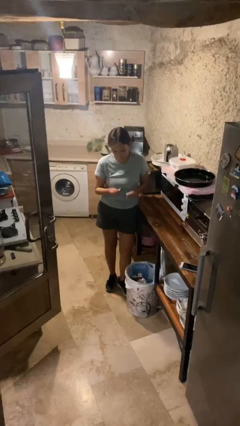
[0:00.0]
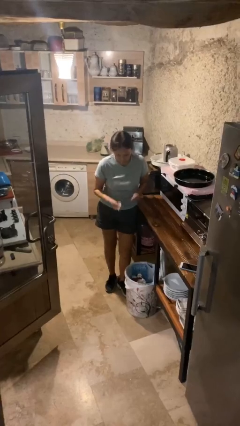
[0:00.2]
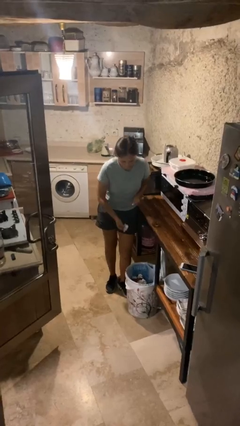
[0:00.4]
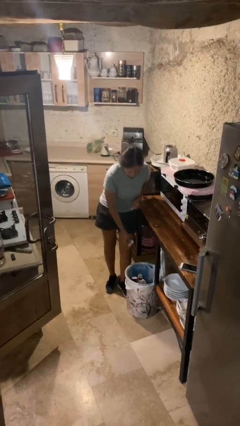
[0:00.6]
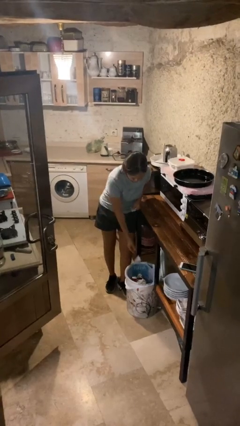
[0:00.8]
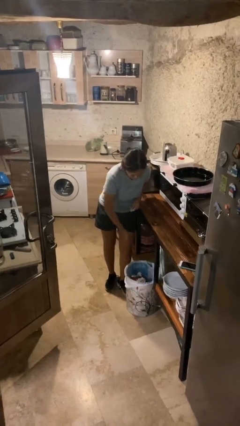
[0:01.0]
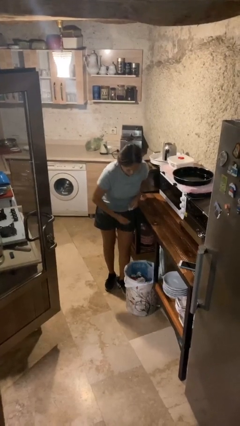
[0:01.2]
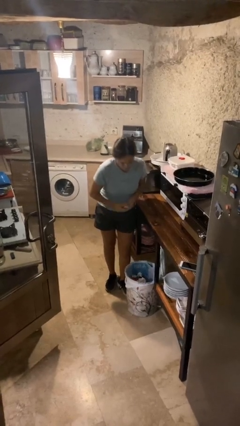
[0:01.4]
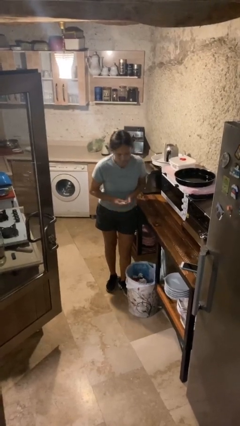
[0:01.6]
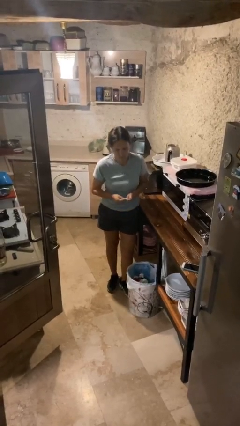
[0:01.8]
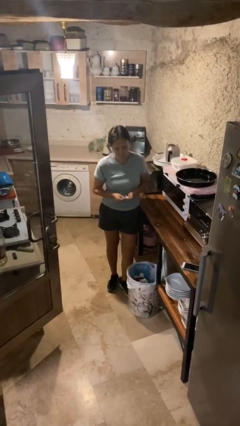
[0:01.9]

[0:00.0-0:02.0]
person discards trash

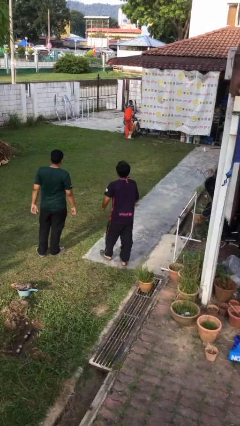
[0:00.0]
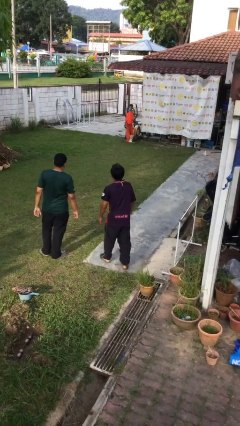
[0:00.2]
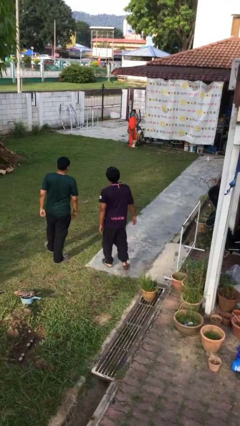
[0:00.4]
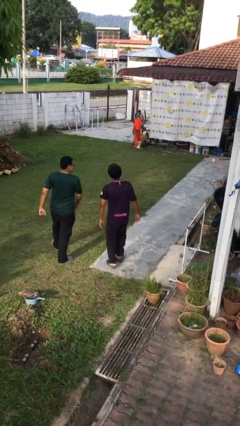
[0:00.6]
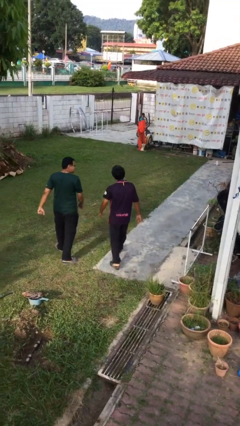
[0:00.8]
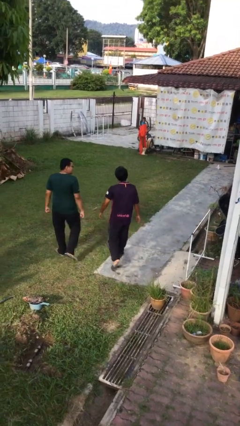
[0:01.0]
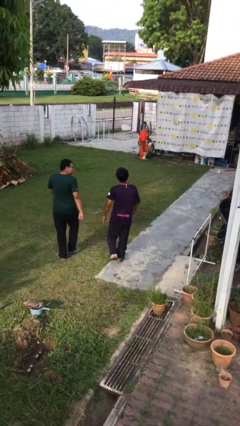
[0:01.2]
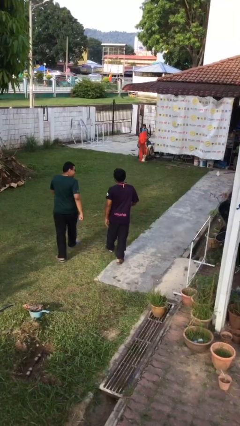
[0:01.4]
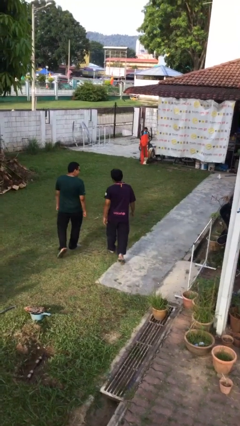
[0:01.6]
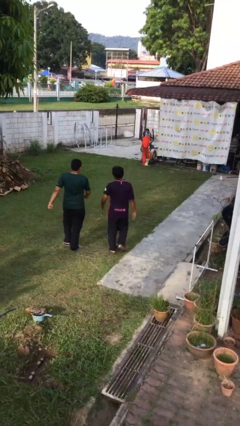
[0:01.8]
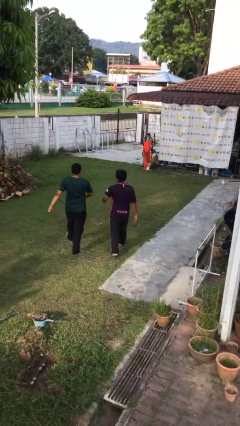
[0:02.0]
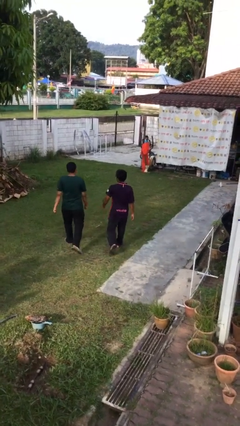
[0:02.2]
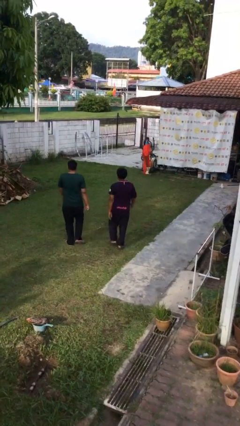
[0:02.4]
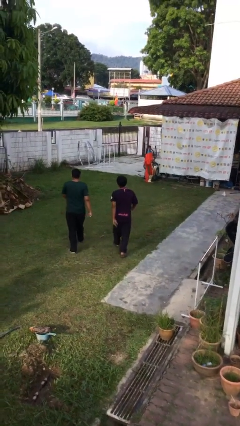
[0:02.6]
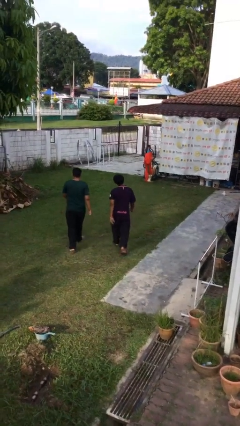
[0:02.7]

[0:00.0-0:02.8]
person talks to person

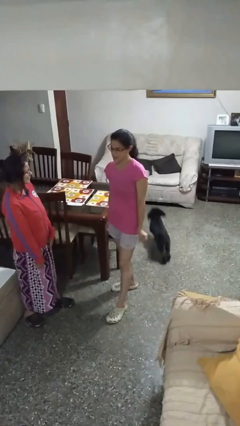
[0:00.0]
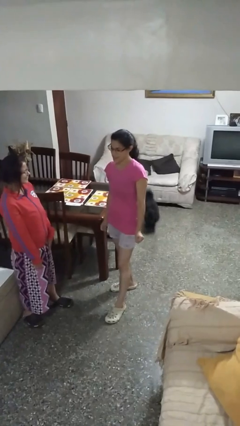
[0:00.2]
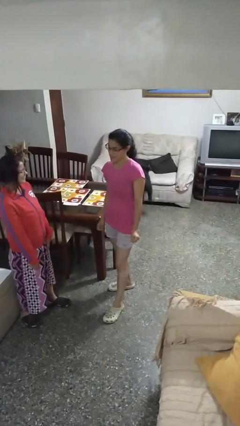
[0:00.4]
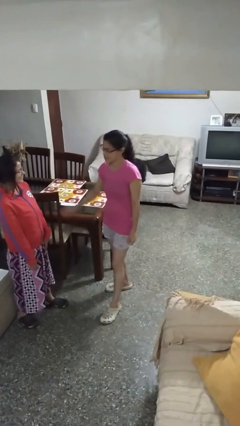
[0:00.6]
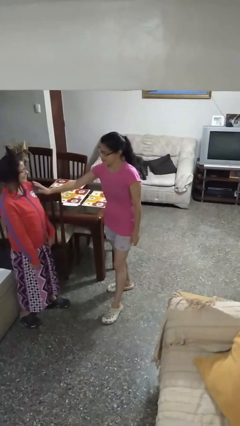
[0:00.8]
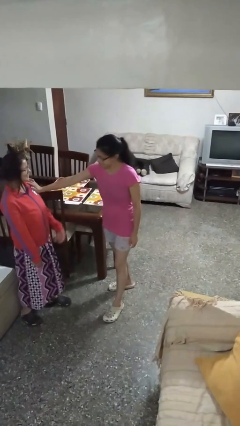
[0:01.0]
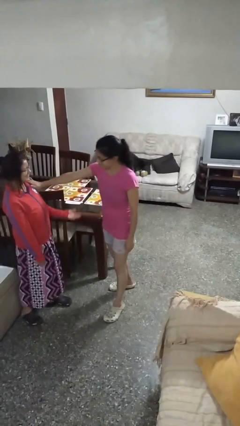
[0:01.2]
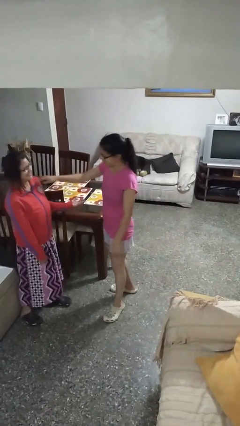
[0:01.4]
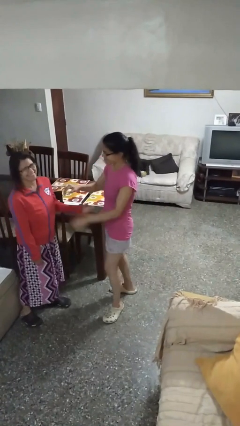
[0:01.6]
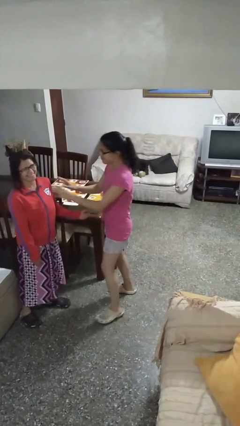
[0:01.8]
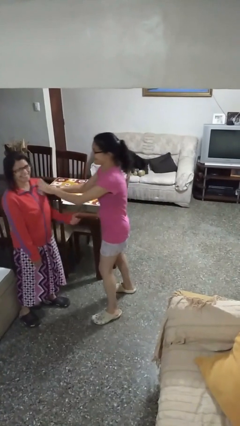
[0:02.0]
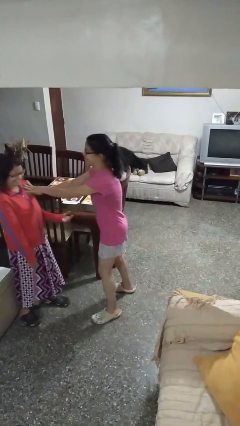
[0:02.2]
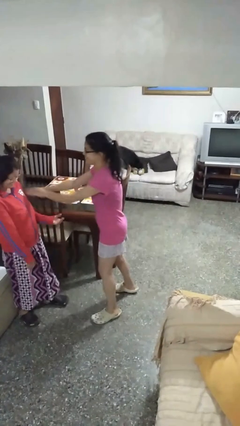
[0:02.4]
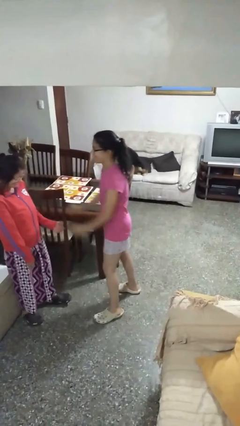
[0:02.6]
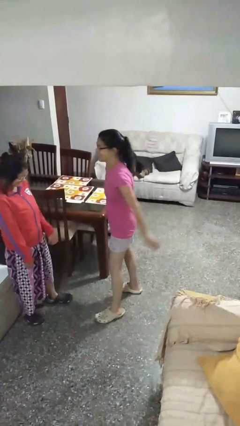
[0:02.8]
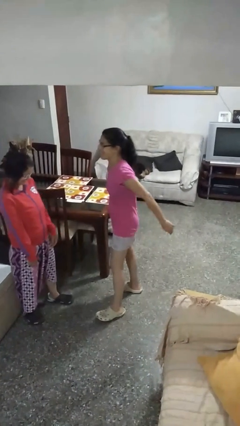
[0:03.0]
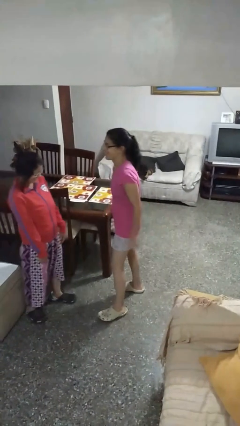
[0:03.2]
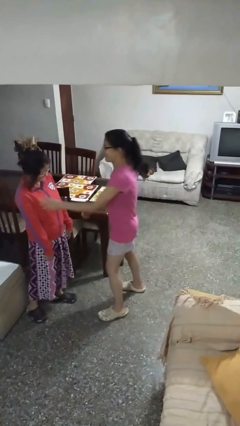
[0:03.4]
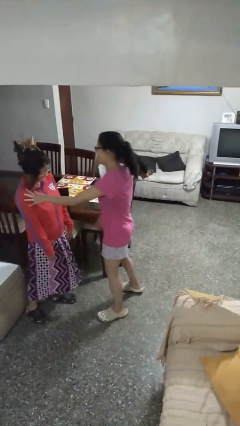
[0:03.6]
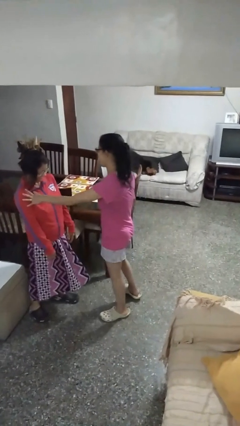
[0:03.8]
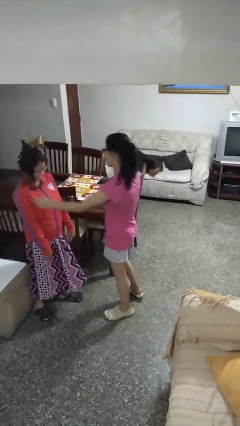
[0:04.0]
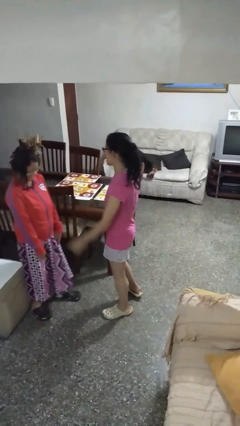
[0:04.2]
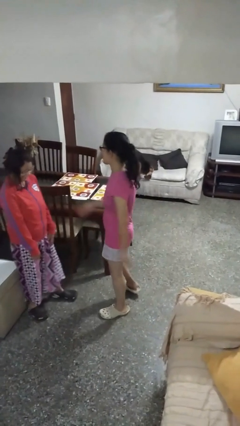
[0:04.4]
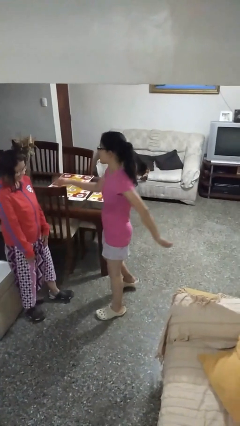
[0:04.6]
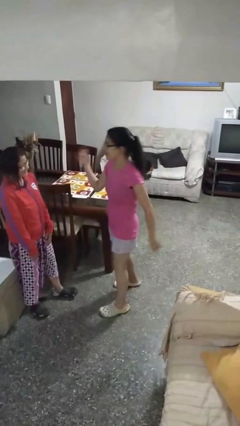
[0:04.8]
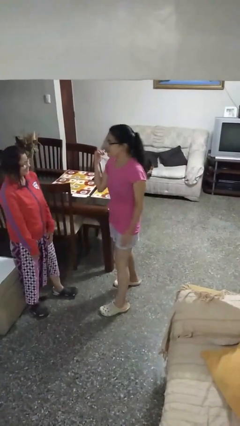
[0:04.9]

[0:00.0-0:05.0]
person shoves person

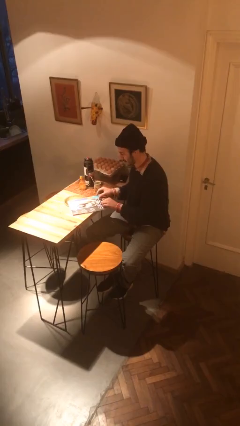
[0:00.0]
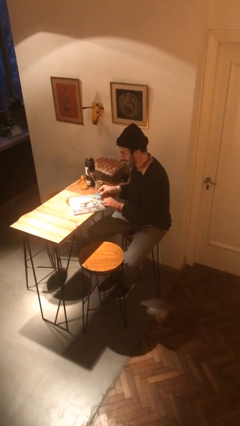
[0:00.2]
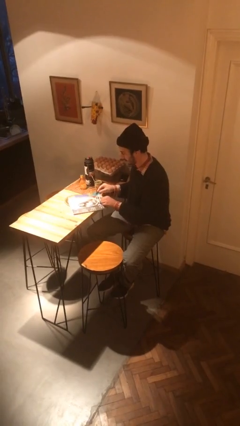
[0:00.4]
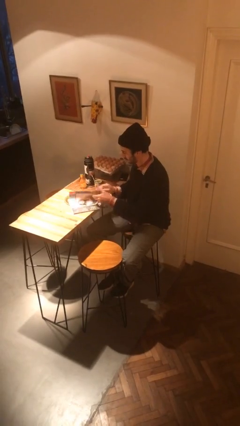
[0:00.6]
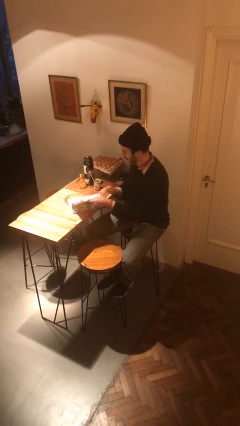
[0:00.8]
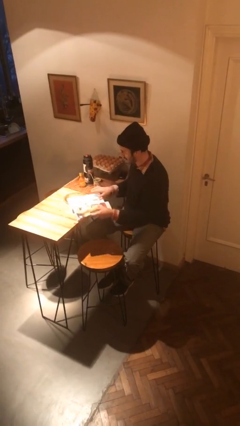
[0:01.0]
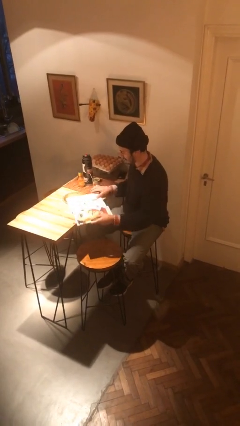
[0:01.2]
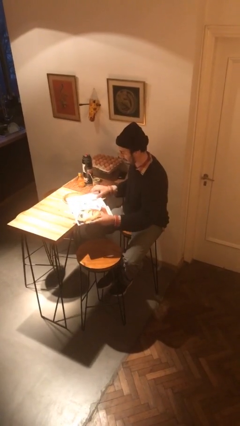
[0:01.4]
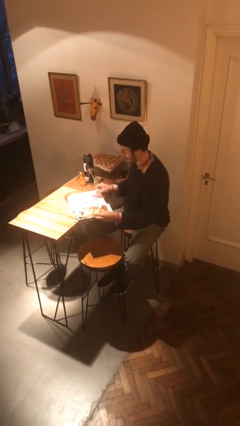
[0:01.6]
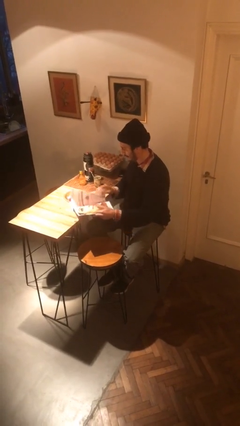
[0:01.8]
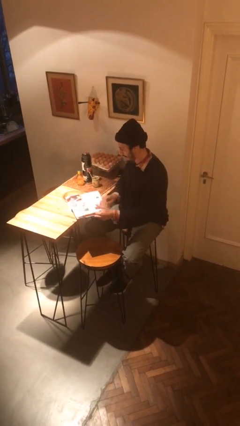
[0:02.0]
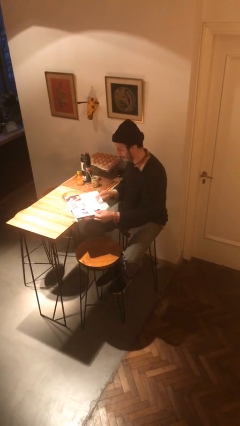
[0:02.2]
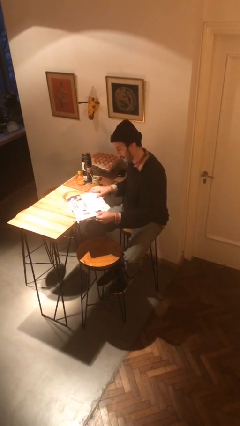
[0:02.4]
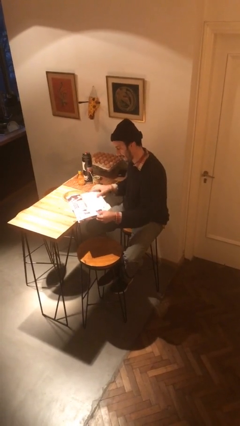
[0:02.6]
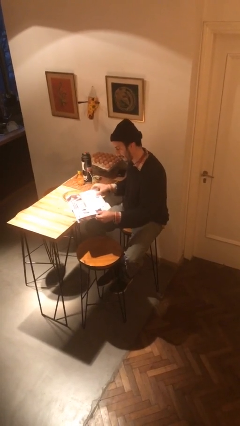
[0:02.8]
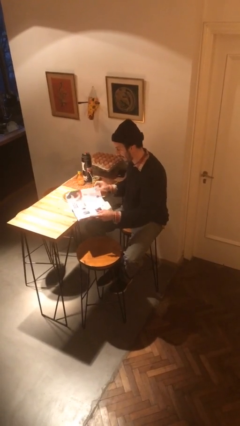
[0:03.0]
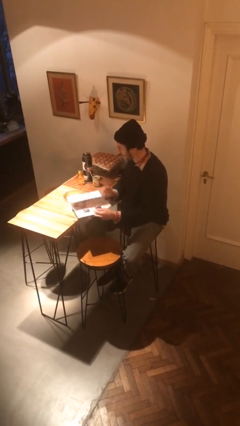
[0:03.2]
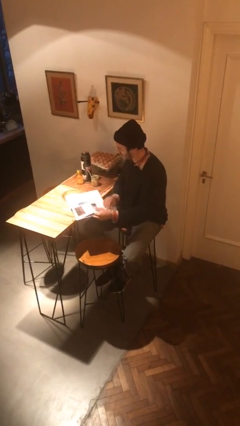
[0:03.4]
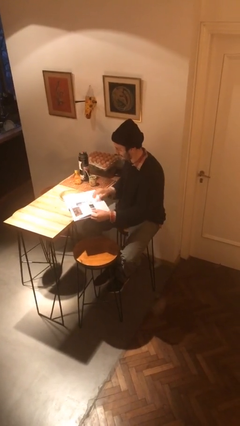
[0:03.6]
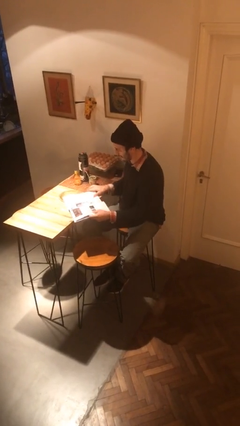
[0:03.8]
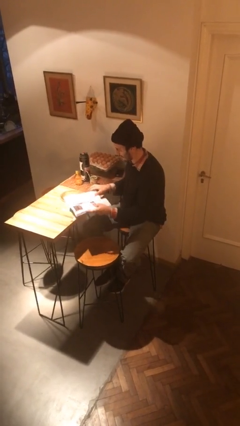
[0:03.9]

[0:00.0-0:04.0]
person reads magazine

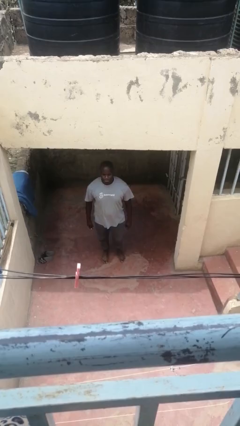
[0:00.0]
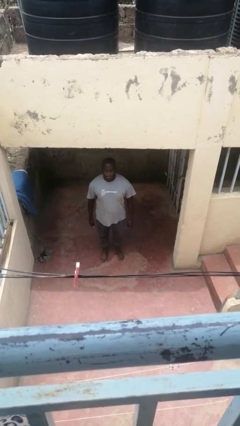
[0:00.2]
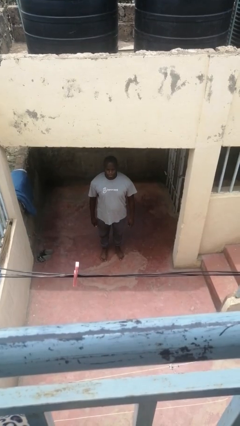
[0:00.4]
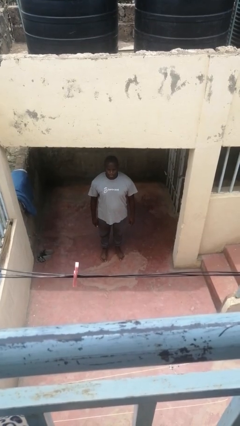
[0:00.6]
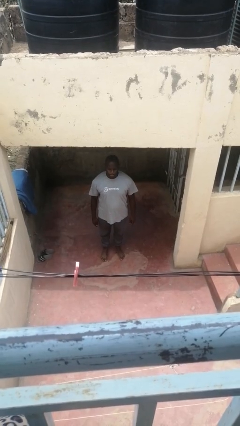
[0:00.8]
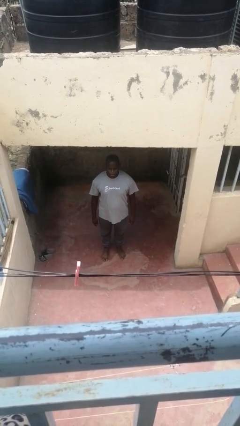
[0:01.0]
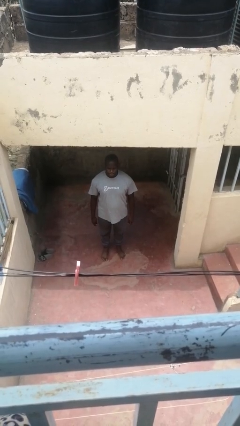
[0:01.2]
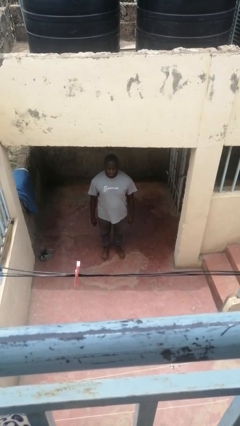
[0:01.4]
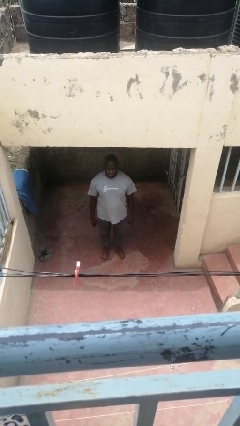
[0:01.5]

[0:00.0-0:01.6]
person exercises with lunges

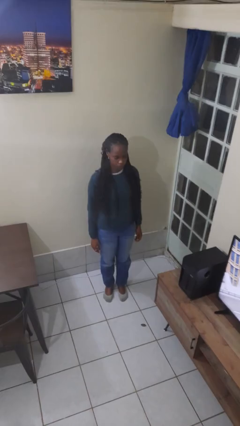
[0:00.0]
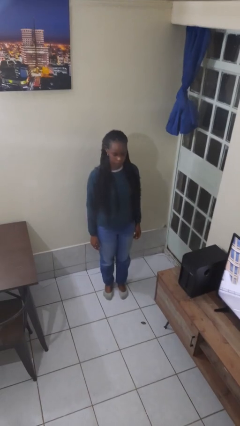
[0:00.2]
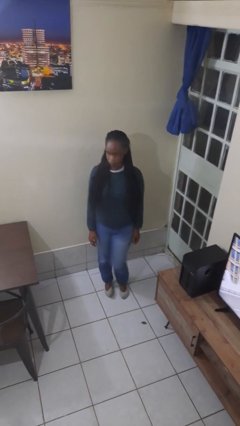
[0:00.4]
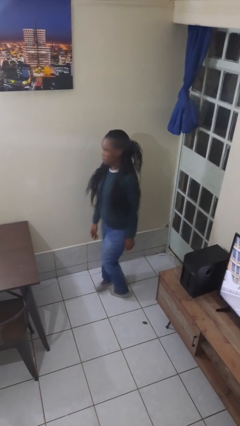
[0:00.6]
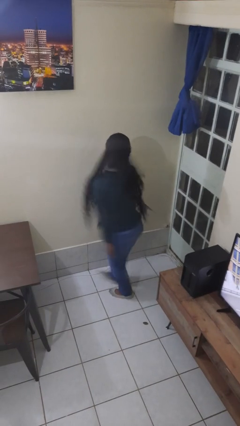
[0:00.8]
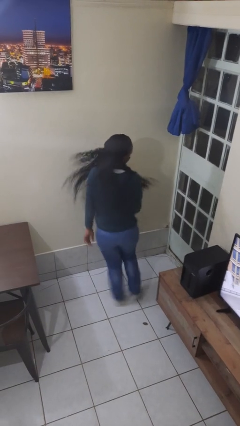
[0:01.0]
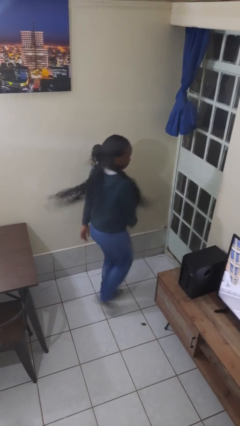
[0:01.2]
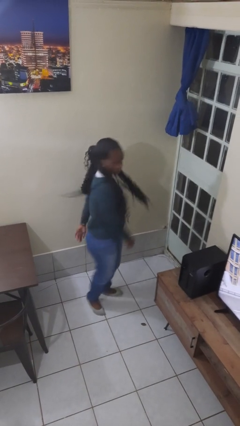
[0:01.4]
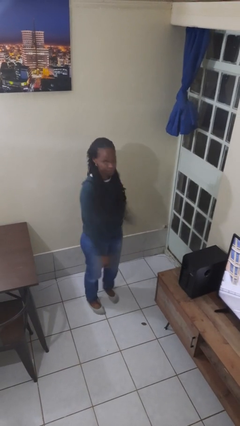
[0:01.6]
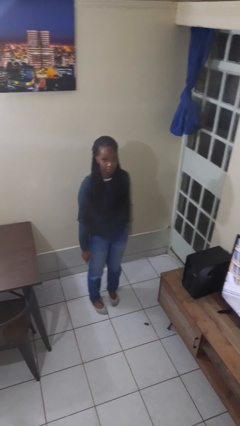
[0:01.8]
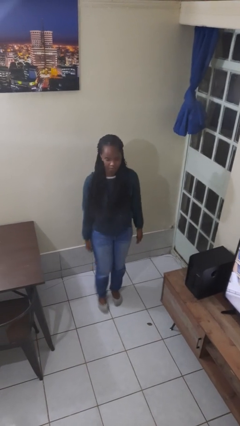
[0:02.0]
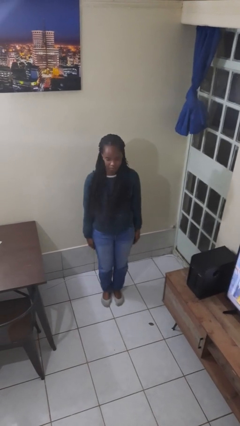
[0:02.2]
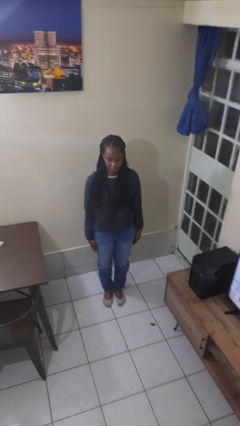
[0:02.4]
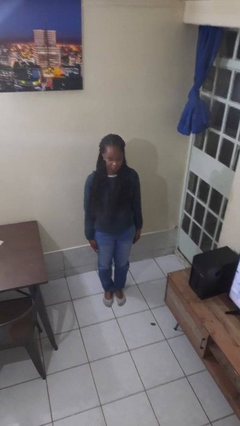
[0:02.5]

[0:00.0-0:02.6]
person twirls
